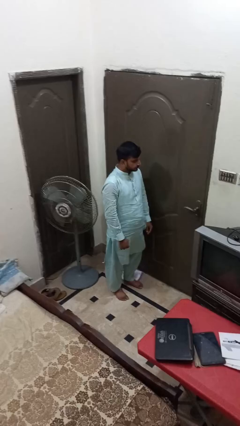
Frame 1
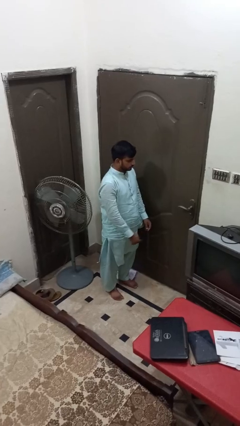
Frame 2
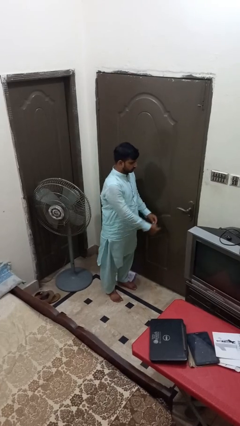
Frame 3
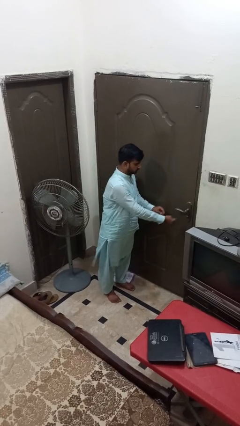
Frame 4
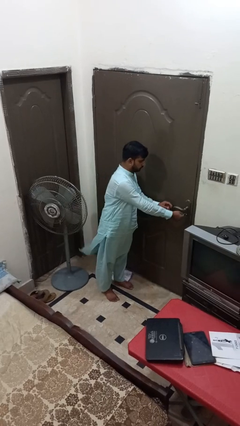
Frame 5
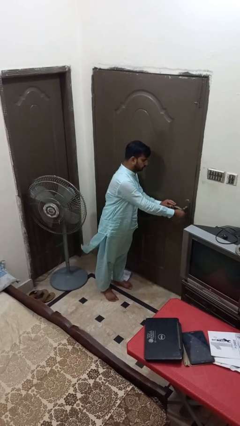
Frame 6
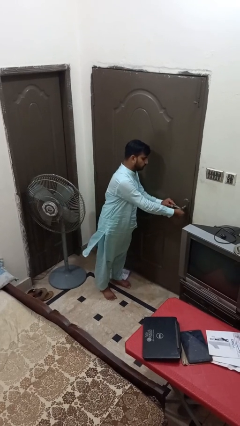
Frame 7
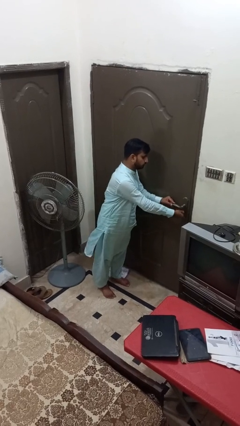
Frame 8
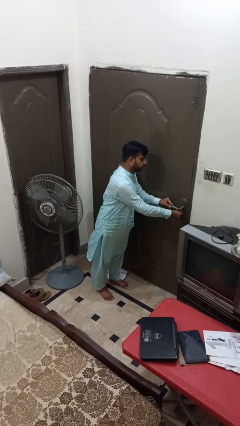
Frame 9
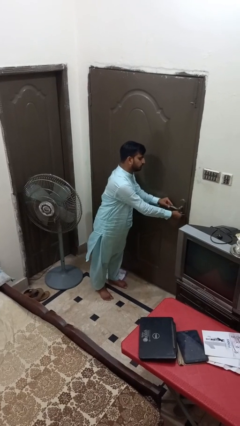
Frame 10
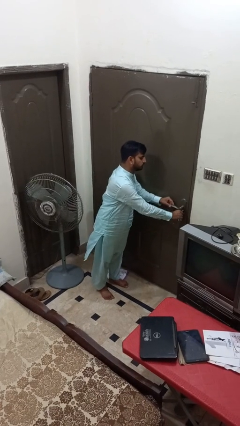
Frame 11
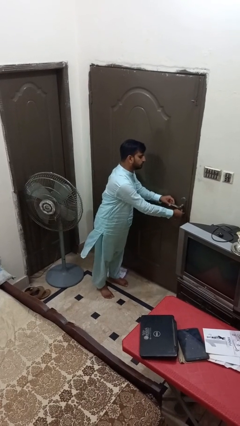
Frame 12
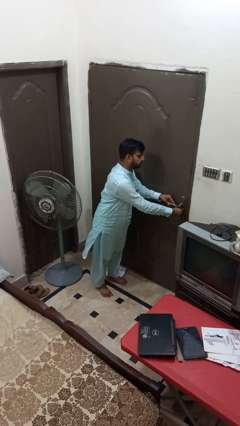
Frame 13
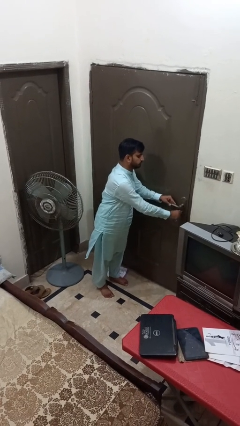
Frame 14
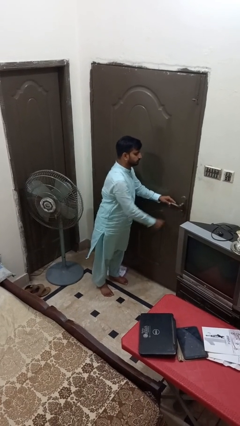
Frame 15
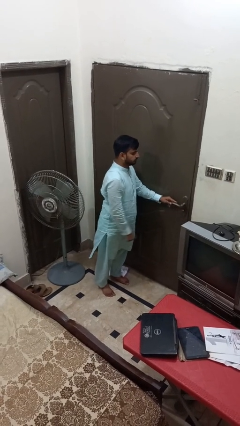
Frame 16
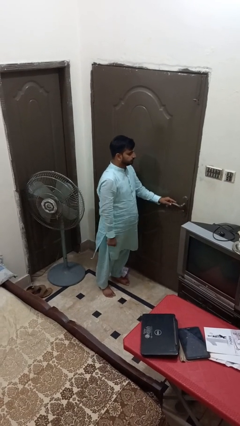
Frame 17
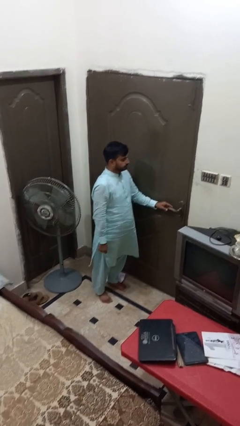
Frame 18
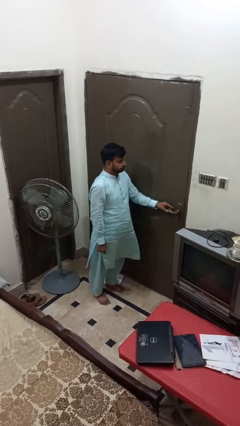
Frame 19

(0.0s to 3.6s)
person unlocks door with keys

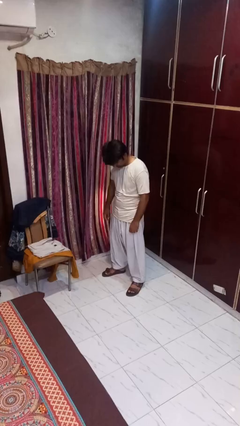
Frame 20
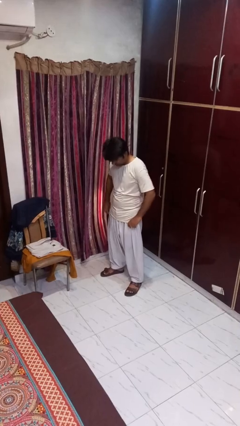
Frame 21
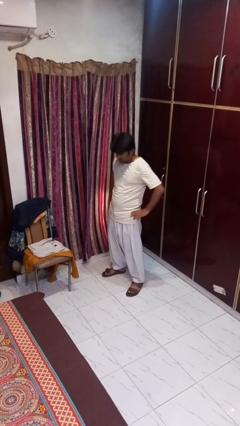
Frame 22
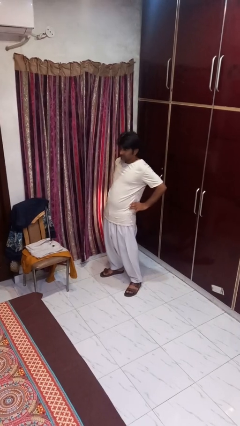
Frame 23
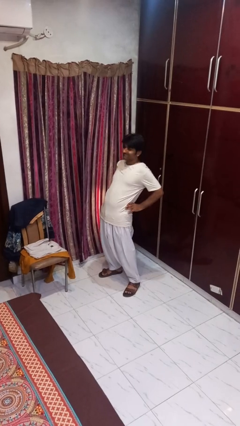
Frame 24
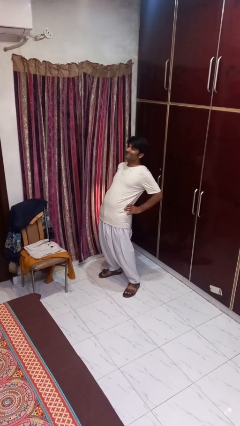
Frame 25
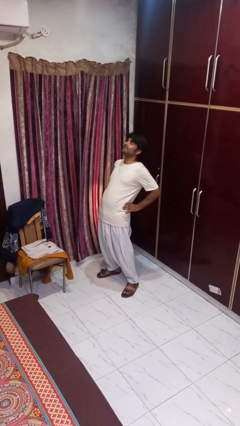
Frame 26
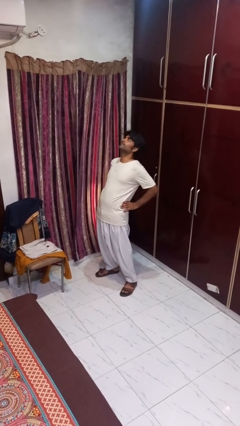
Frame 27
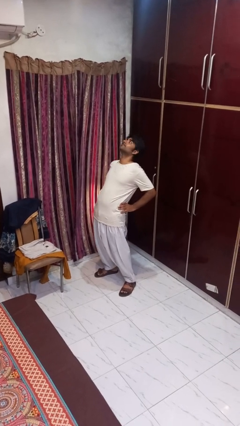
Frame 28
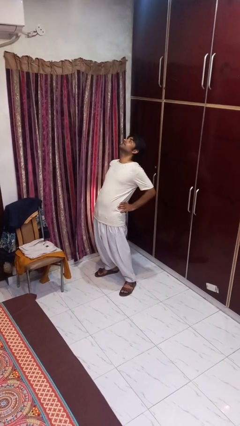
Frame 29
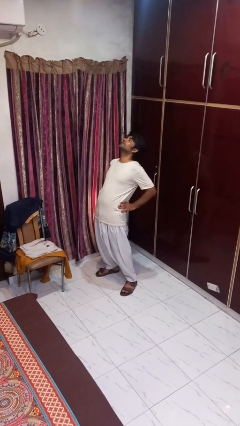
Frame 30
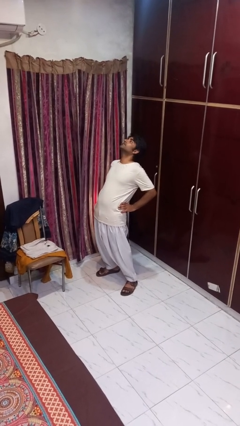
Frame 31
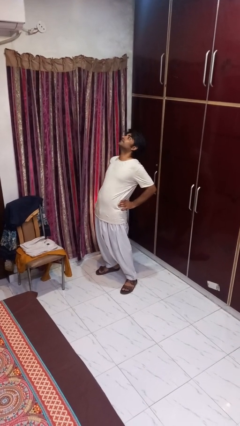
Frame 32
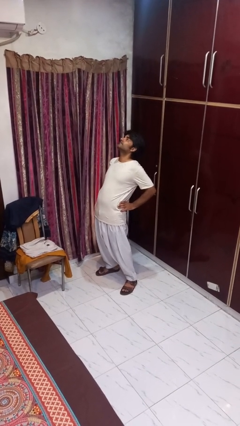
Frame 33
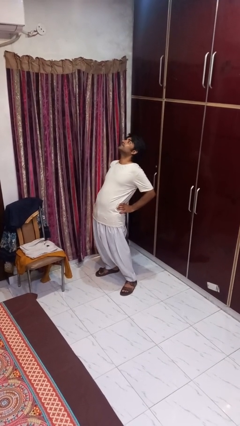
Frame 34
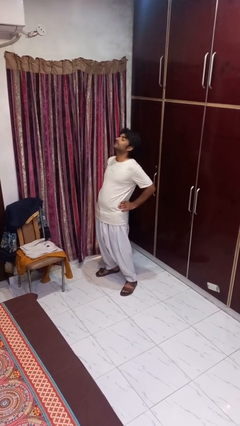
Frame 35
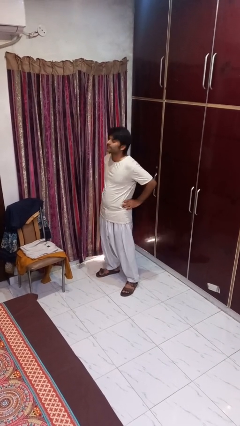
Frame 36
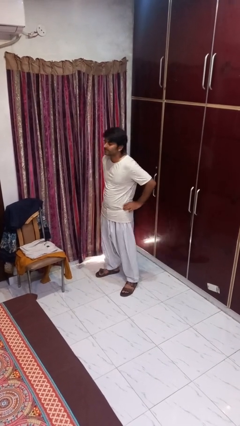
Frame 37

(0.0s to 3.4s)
person stretches back

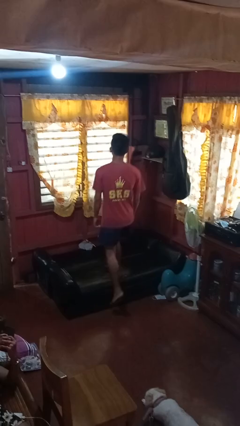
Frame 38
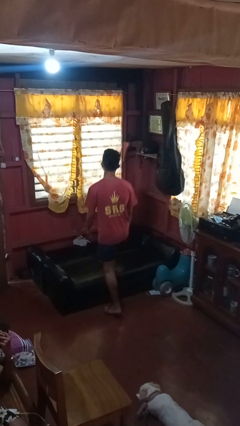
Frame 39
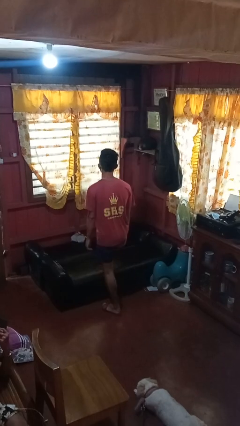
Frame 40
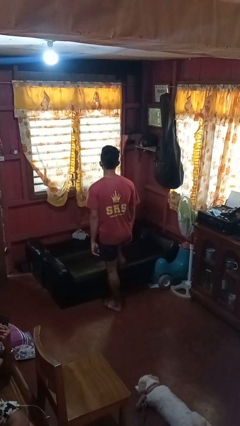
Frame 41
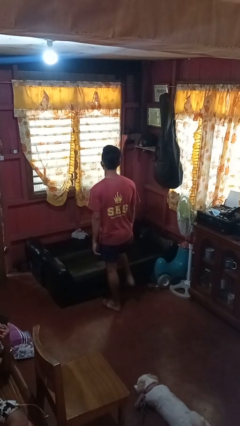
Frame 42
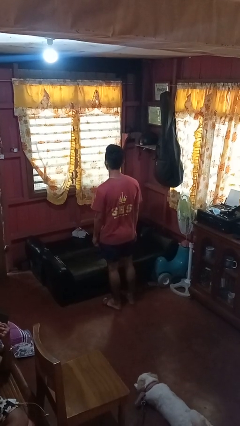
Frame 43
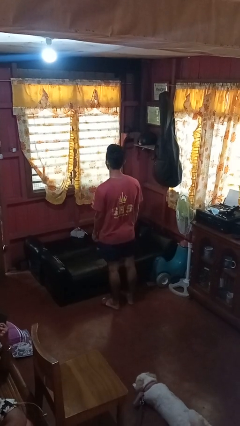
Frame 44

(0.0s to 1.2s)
person climbs off couch

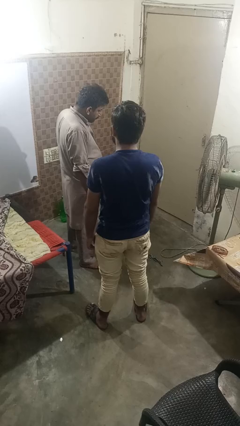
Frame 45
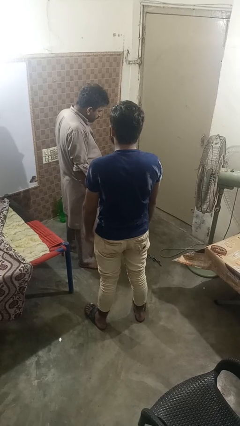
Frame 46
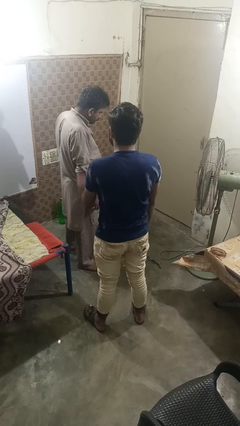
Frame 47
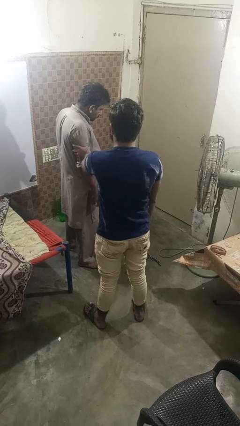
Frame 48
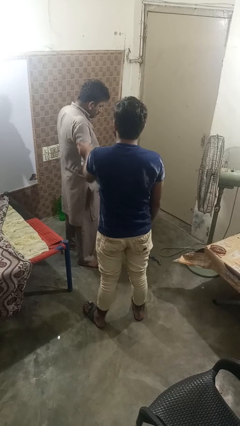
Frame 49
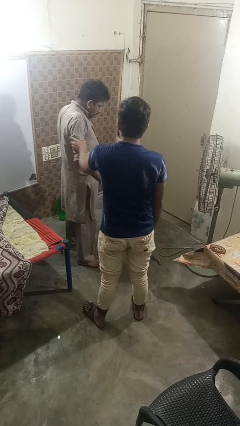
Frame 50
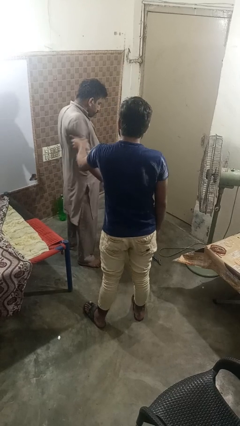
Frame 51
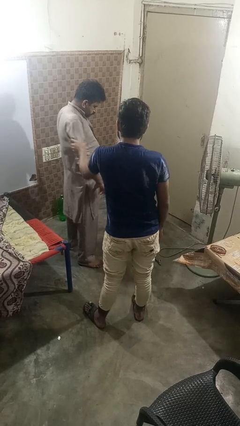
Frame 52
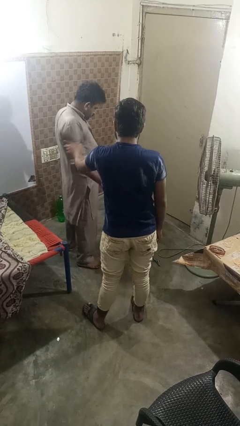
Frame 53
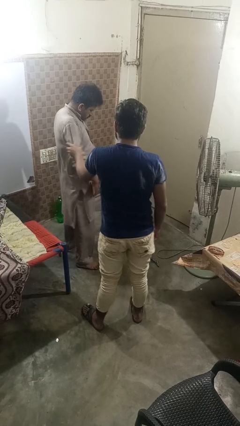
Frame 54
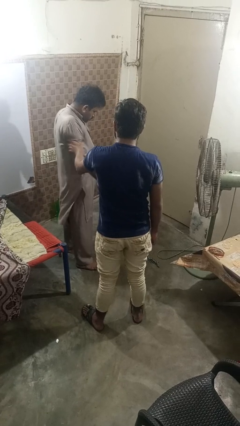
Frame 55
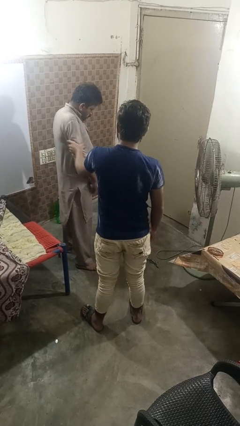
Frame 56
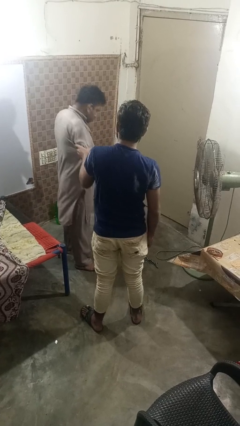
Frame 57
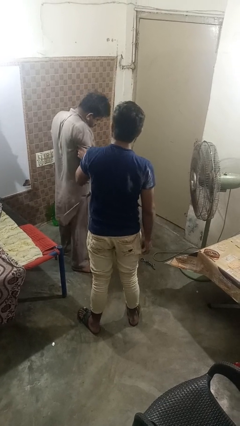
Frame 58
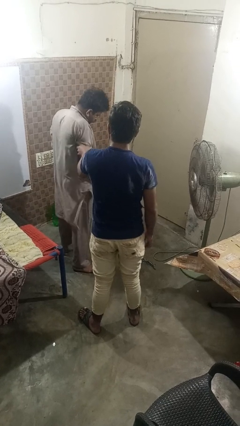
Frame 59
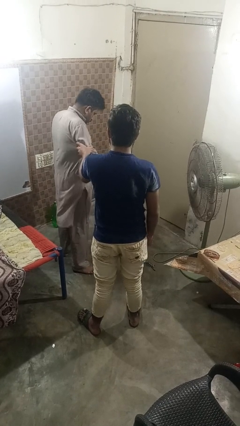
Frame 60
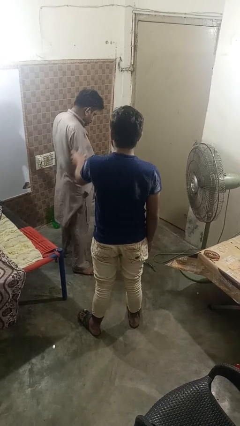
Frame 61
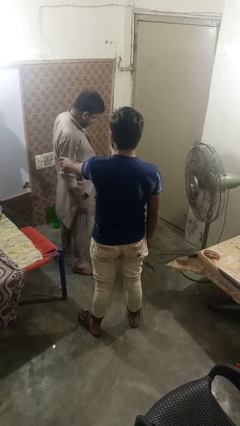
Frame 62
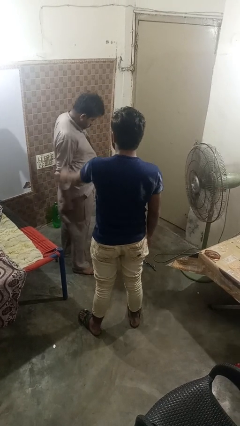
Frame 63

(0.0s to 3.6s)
person grabs person by bicep

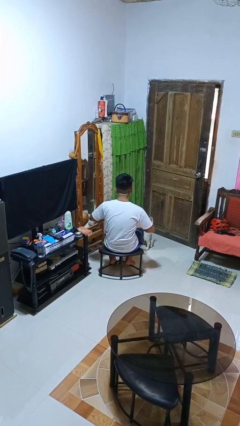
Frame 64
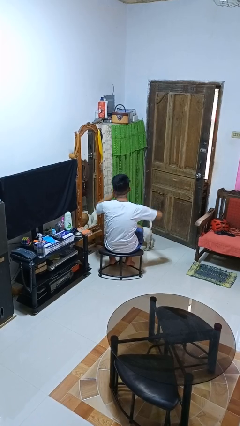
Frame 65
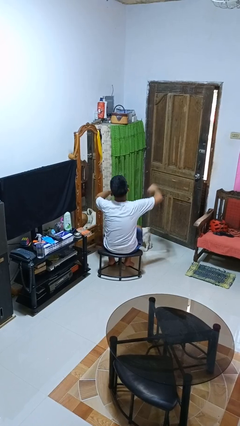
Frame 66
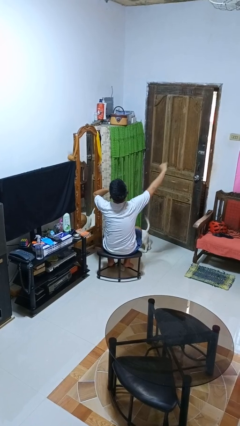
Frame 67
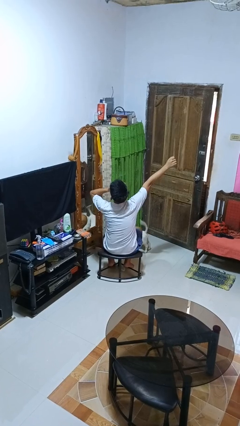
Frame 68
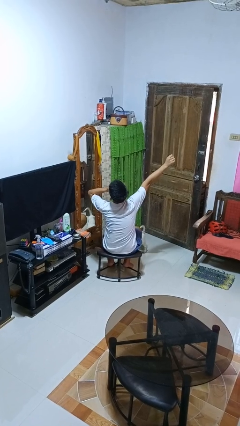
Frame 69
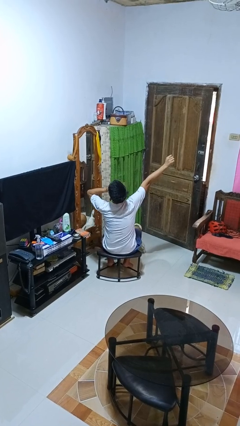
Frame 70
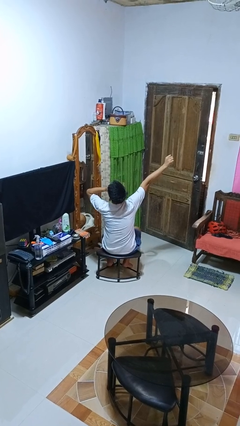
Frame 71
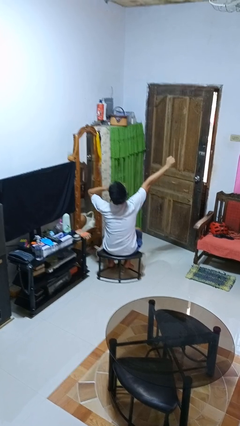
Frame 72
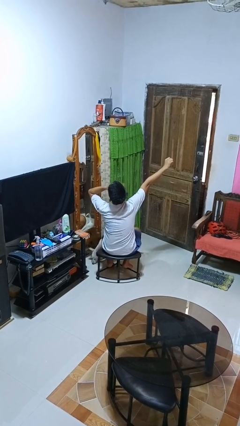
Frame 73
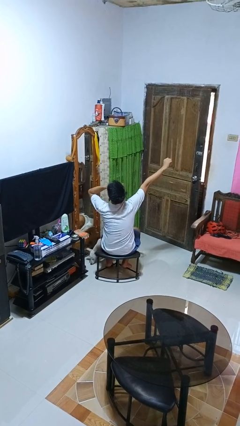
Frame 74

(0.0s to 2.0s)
person yawns

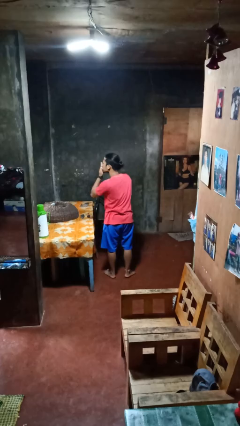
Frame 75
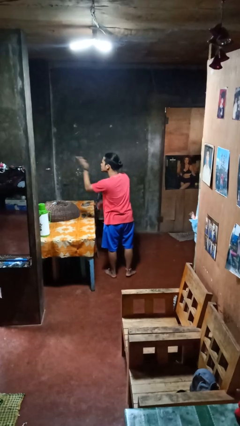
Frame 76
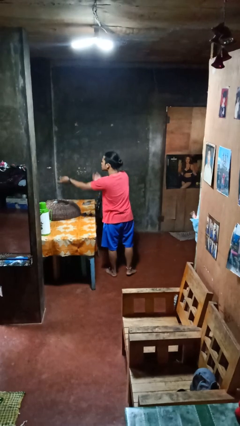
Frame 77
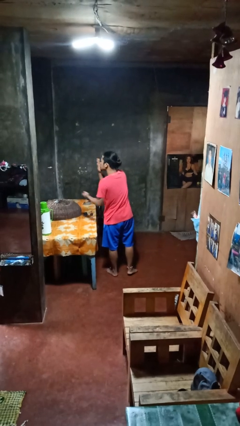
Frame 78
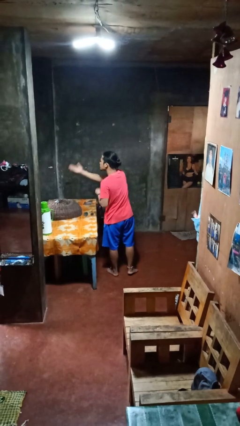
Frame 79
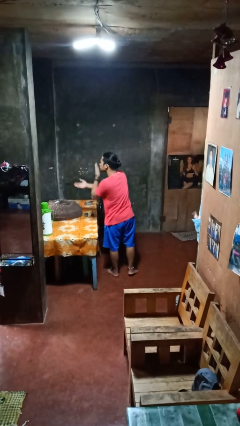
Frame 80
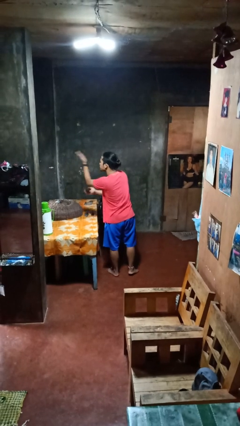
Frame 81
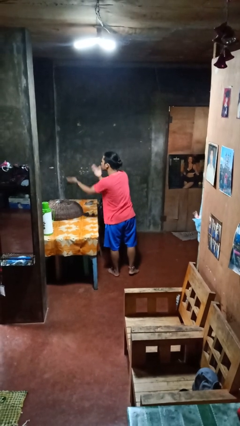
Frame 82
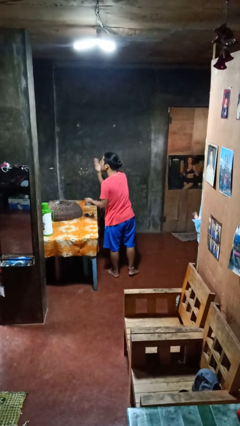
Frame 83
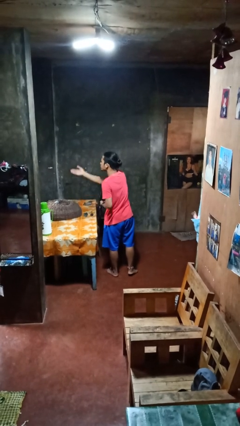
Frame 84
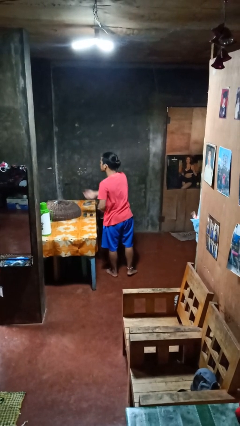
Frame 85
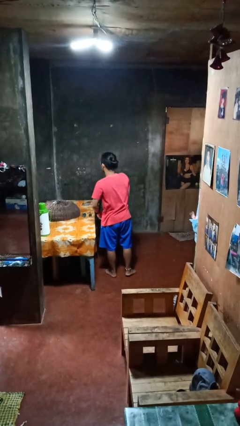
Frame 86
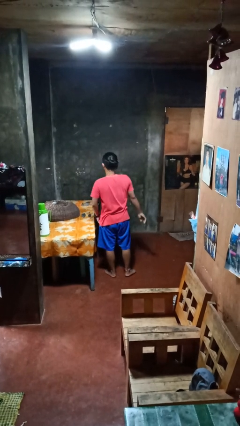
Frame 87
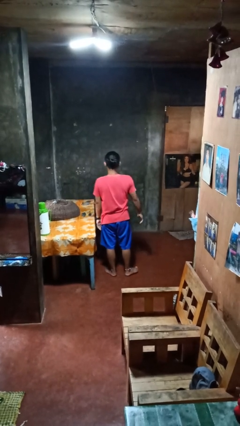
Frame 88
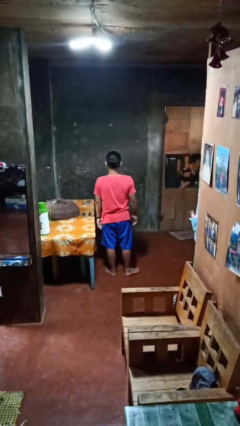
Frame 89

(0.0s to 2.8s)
person gestures blow kiss

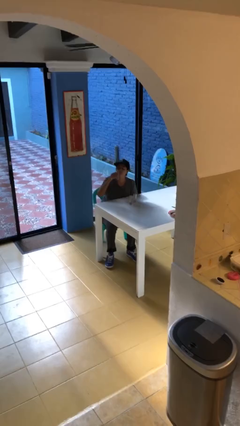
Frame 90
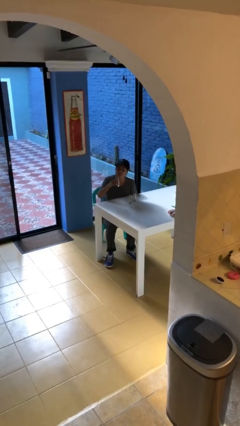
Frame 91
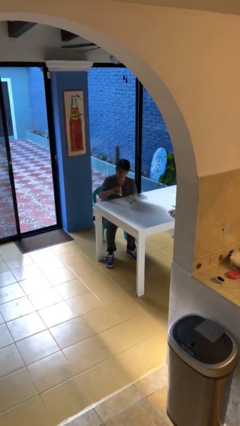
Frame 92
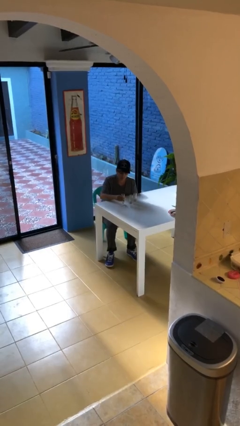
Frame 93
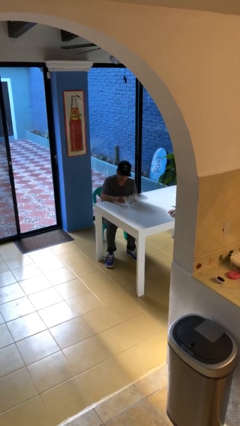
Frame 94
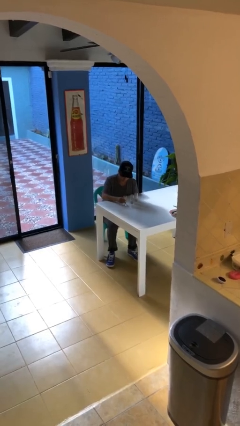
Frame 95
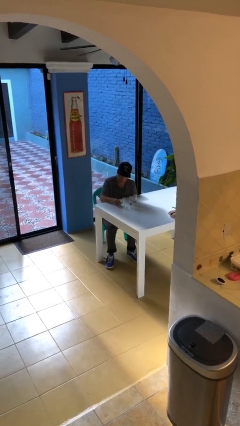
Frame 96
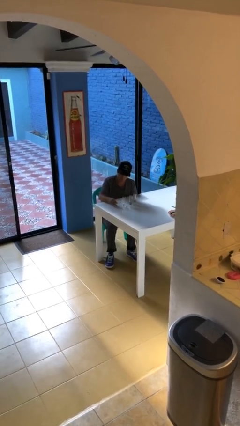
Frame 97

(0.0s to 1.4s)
person puts down object on table
